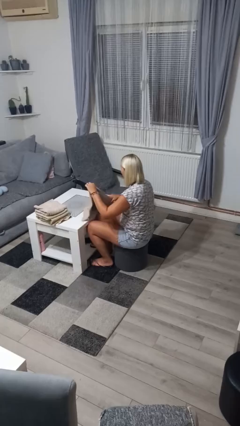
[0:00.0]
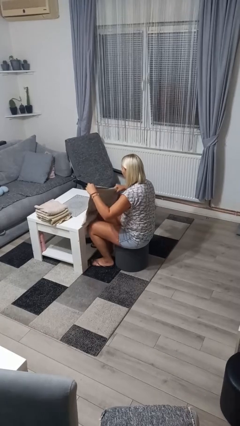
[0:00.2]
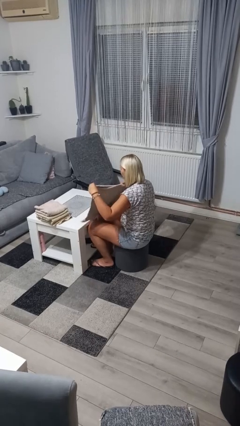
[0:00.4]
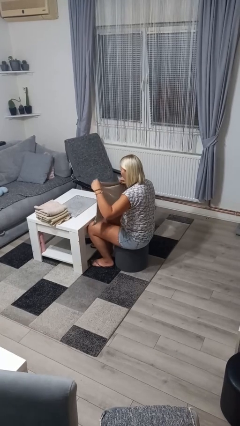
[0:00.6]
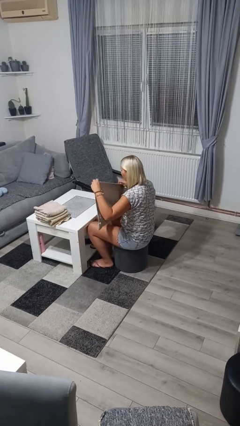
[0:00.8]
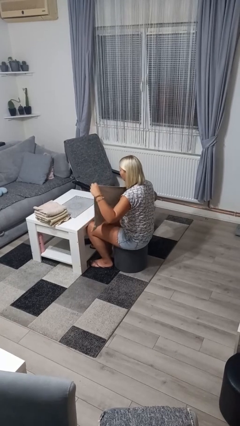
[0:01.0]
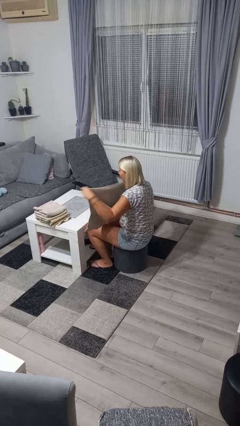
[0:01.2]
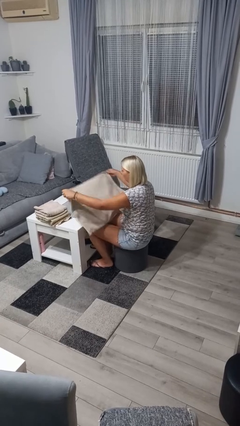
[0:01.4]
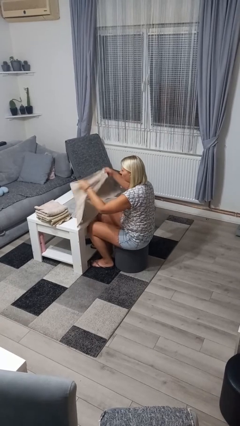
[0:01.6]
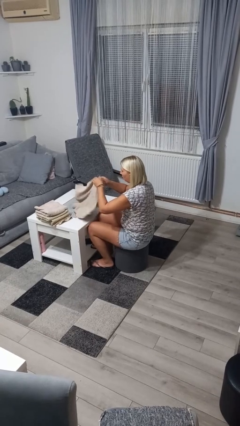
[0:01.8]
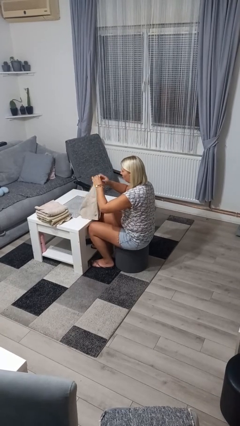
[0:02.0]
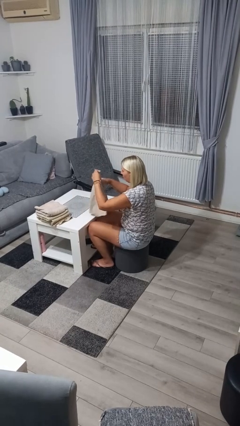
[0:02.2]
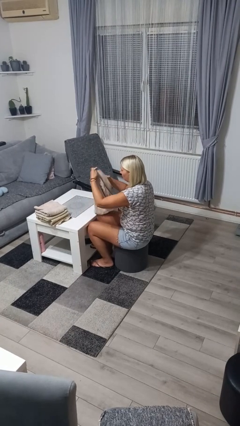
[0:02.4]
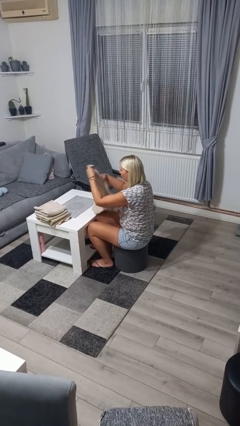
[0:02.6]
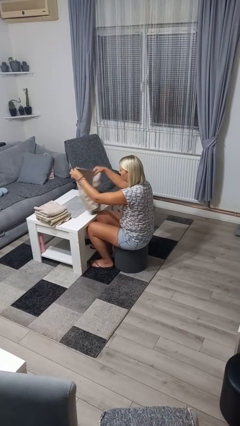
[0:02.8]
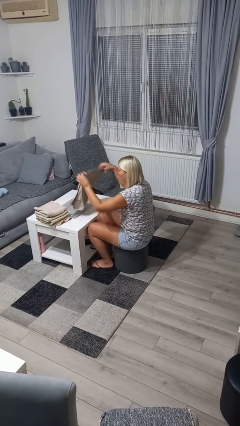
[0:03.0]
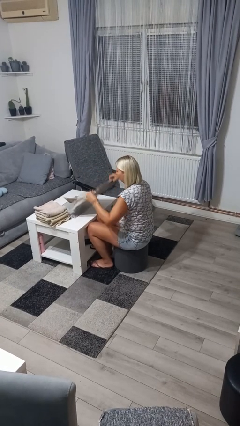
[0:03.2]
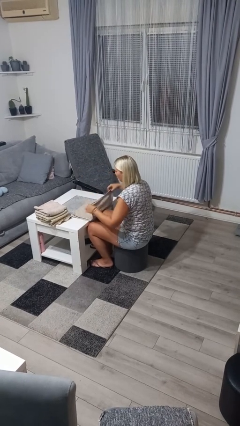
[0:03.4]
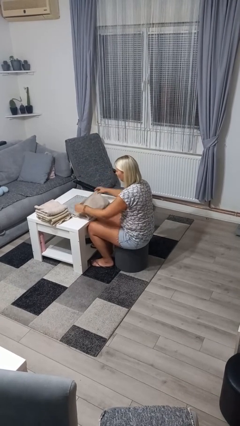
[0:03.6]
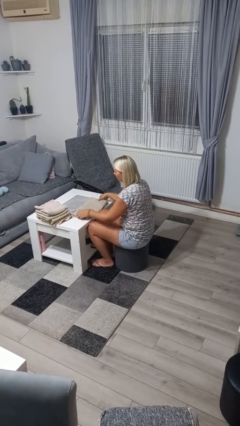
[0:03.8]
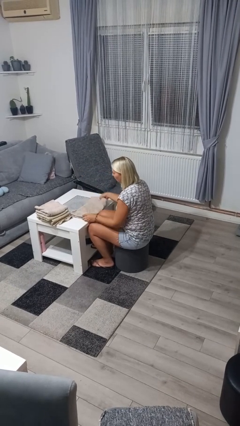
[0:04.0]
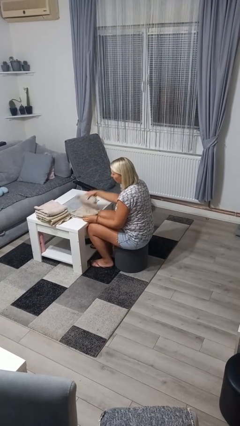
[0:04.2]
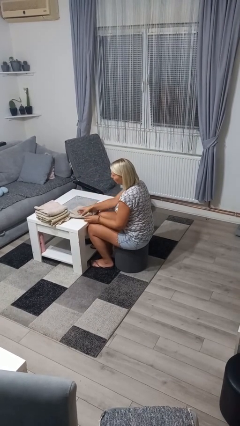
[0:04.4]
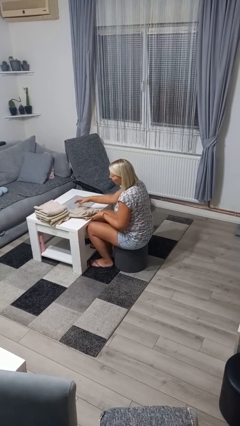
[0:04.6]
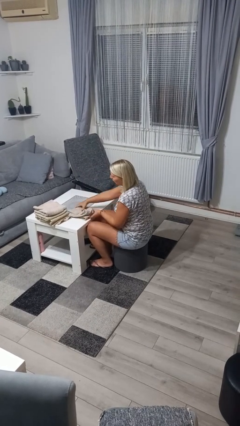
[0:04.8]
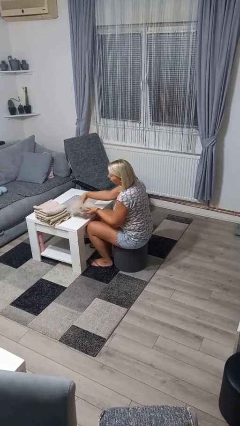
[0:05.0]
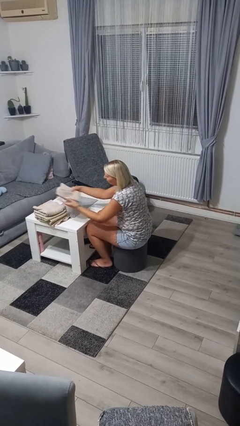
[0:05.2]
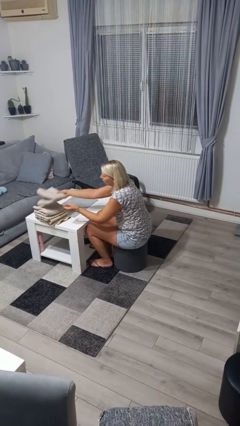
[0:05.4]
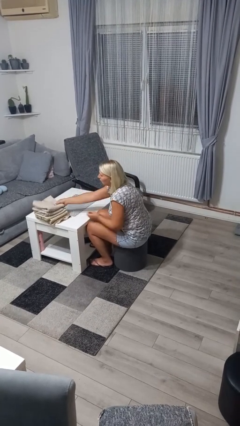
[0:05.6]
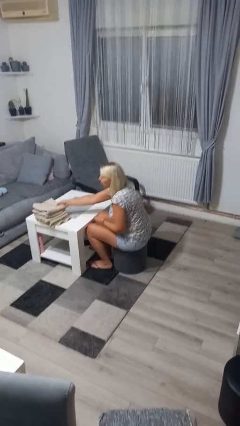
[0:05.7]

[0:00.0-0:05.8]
person folds towel

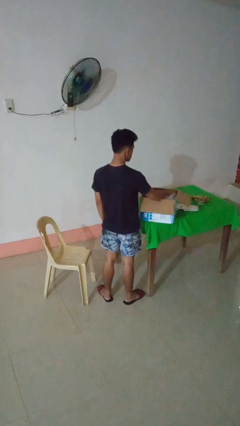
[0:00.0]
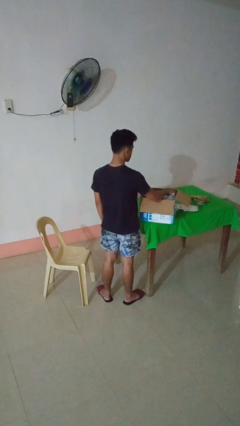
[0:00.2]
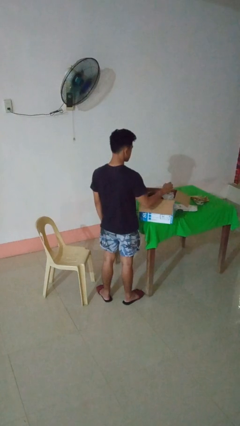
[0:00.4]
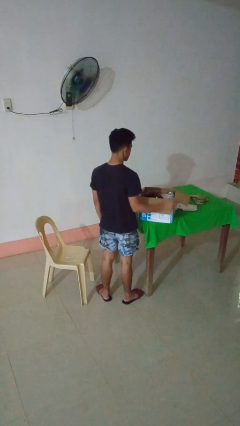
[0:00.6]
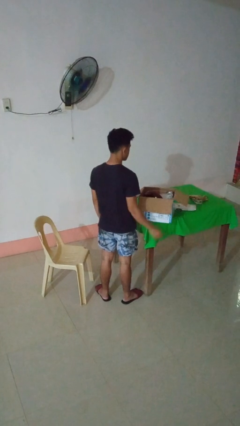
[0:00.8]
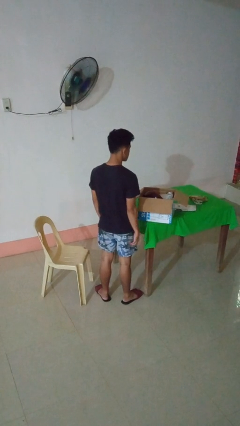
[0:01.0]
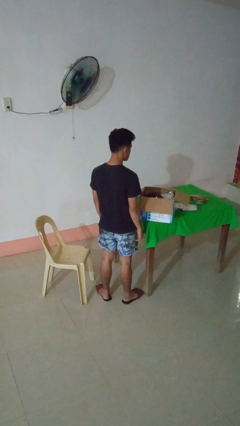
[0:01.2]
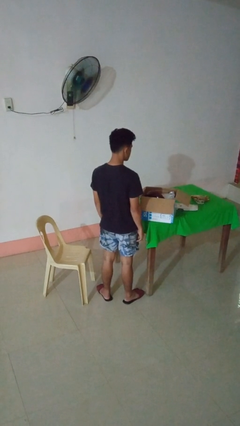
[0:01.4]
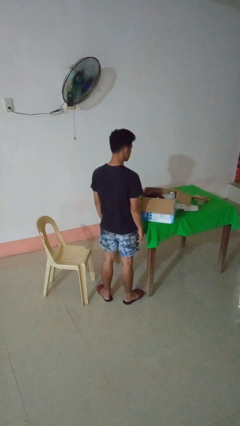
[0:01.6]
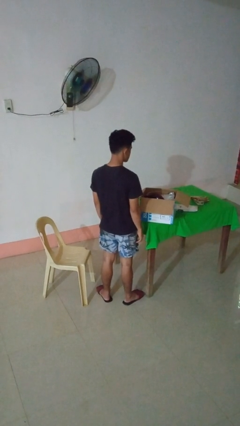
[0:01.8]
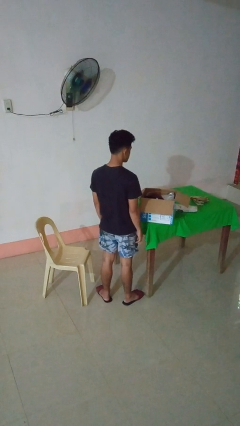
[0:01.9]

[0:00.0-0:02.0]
person puts object into box

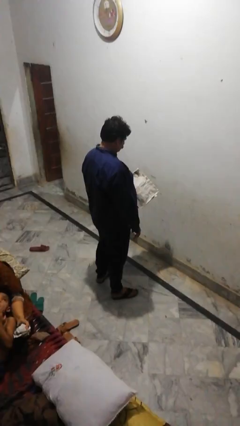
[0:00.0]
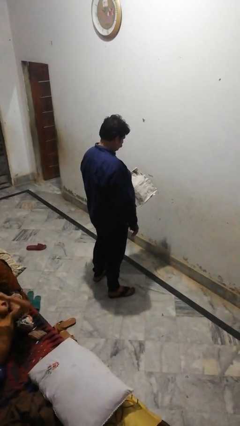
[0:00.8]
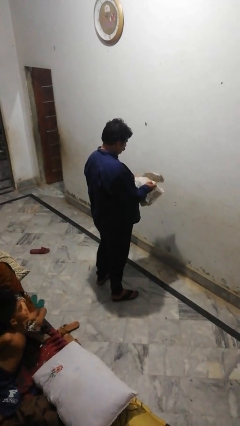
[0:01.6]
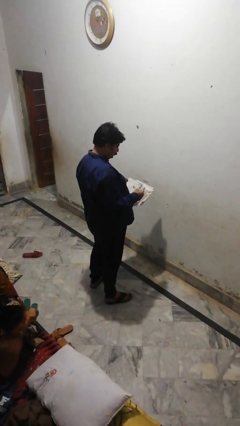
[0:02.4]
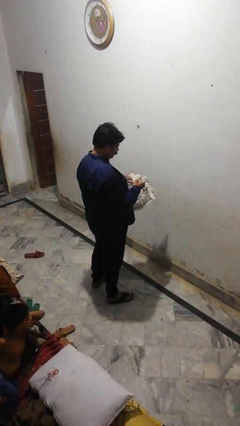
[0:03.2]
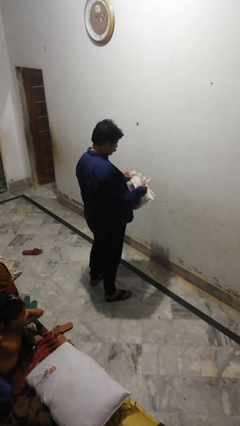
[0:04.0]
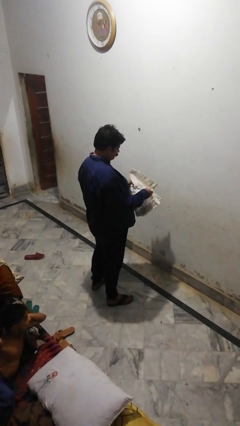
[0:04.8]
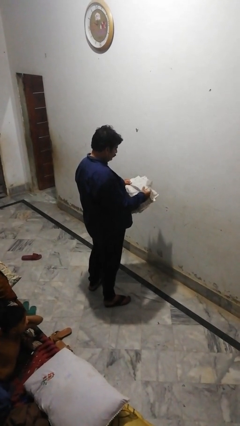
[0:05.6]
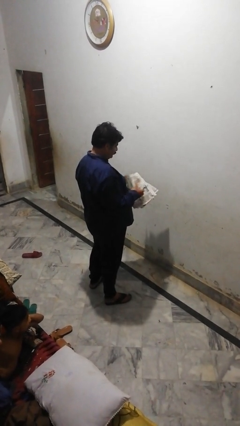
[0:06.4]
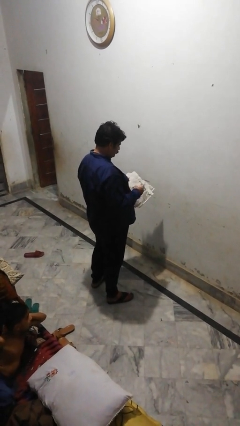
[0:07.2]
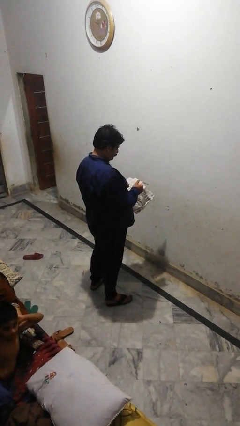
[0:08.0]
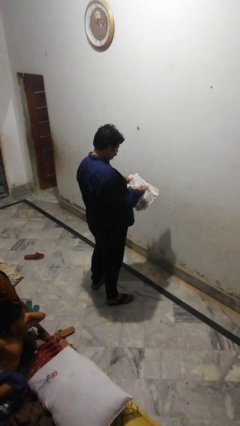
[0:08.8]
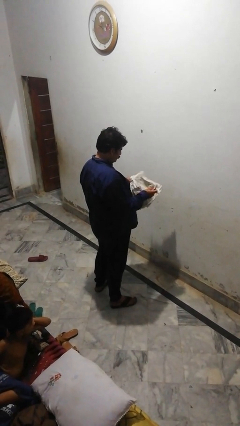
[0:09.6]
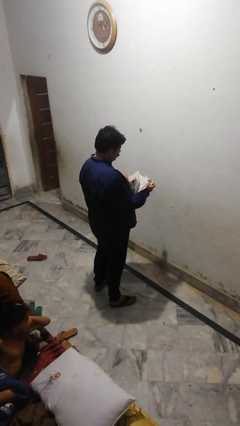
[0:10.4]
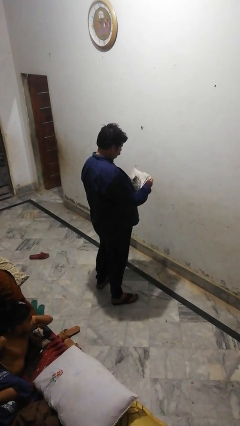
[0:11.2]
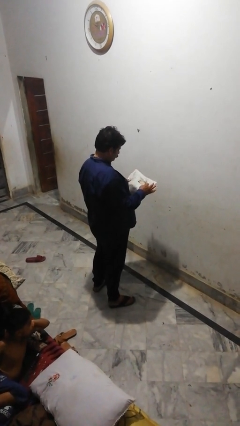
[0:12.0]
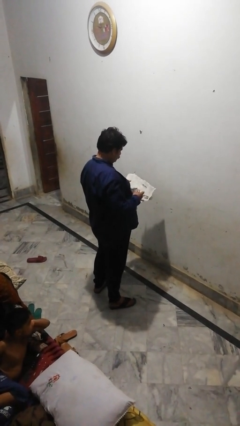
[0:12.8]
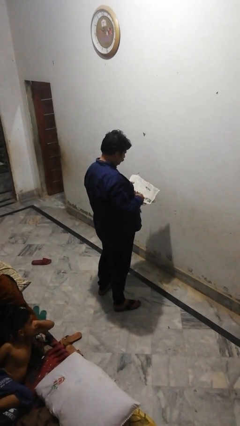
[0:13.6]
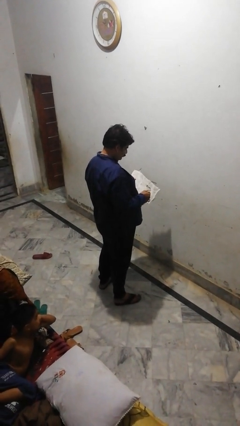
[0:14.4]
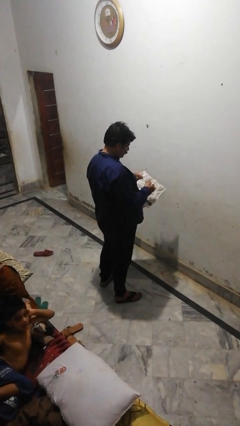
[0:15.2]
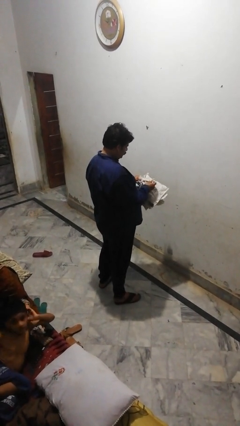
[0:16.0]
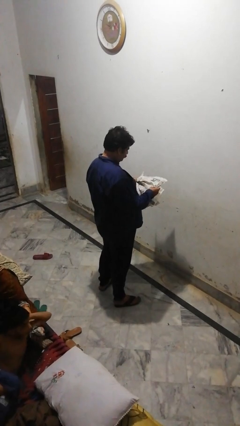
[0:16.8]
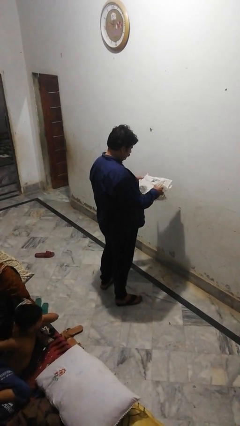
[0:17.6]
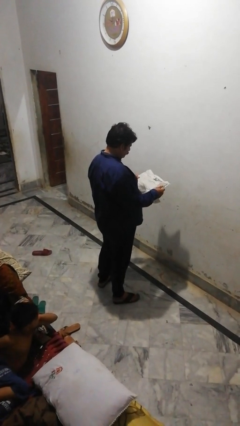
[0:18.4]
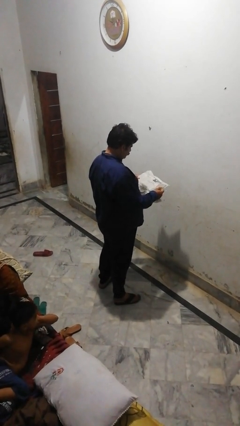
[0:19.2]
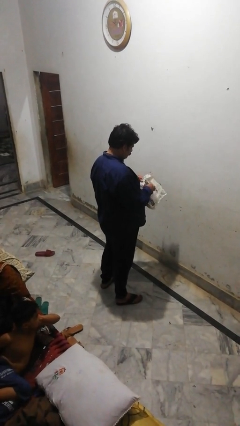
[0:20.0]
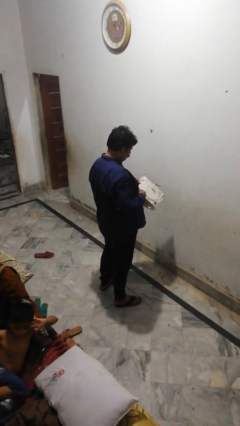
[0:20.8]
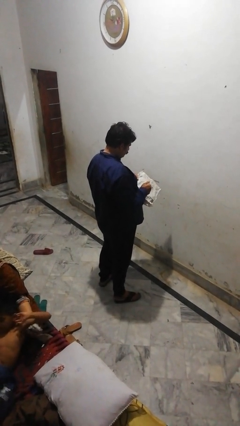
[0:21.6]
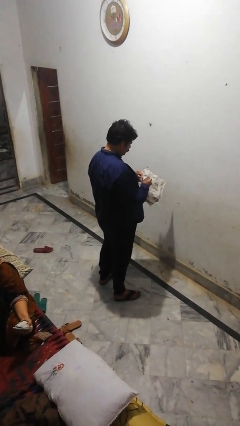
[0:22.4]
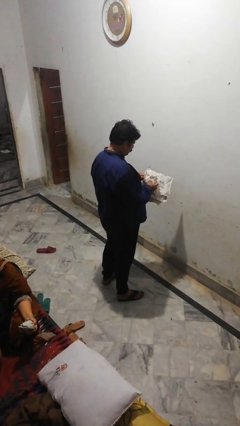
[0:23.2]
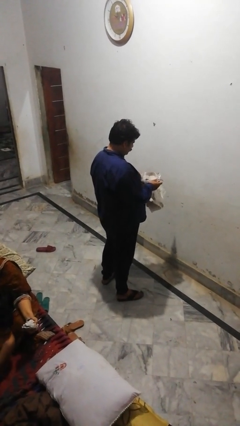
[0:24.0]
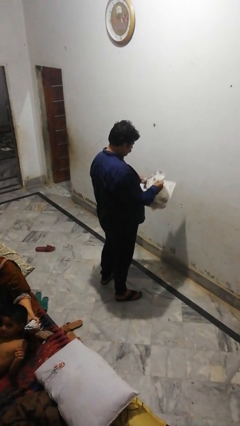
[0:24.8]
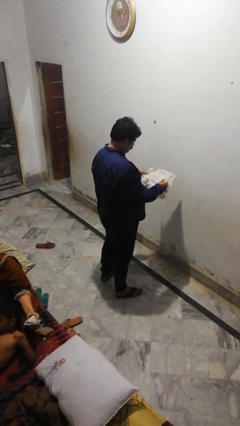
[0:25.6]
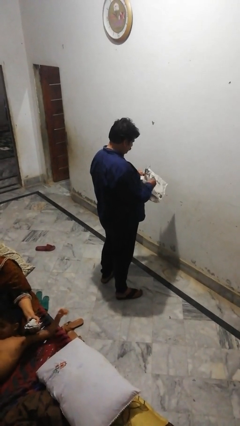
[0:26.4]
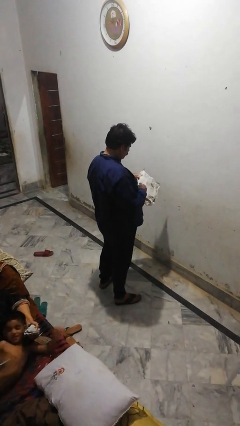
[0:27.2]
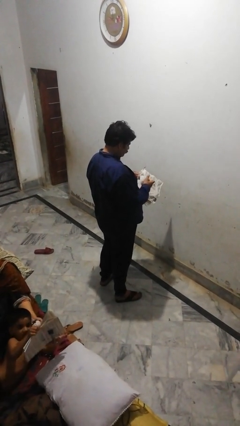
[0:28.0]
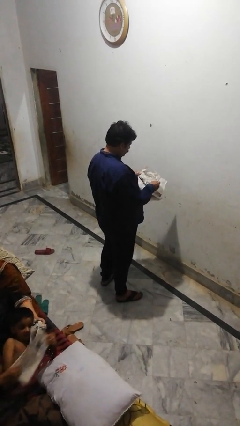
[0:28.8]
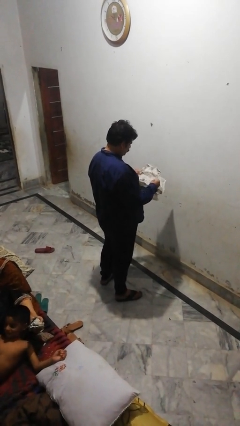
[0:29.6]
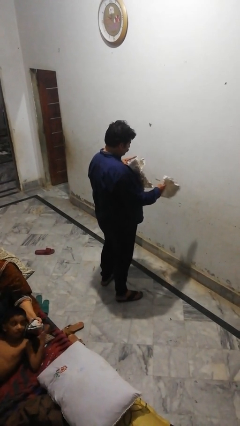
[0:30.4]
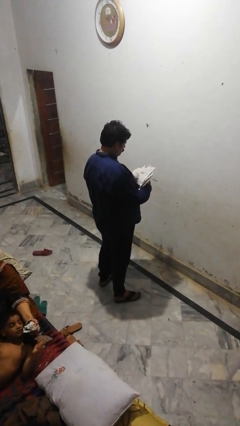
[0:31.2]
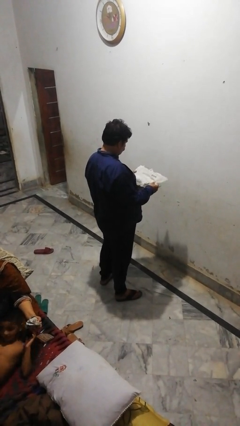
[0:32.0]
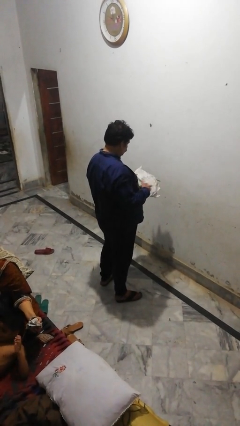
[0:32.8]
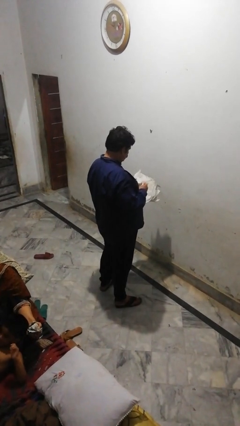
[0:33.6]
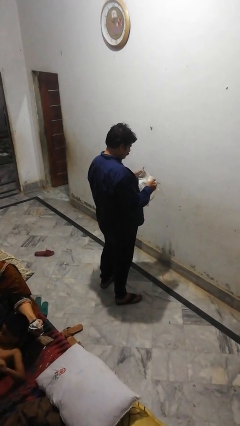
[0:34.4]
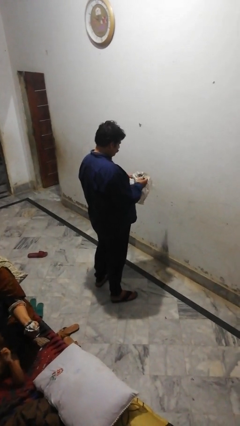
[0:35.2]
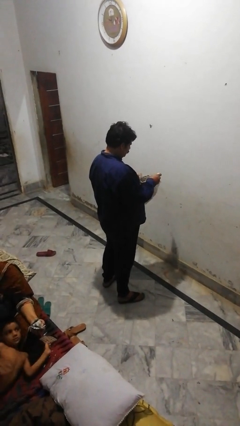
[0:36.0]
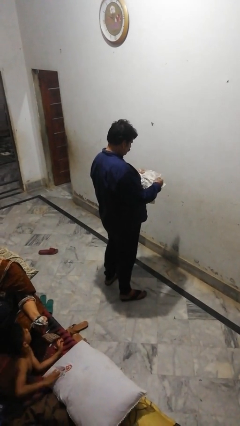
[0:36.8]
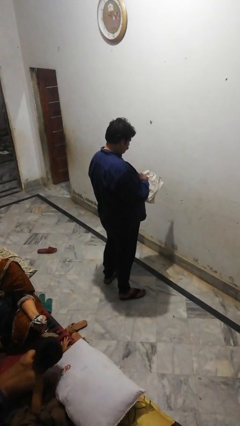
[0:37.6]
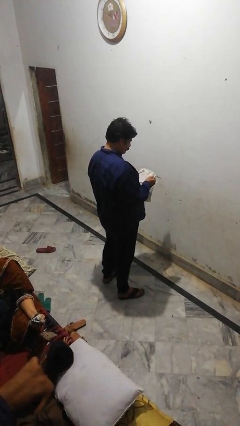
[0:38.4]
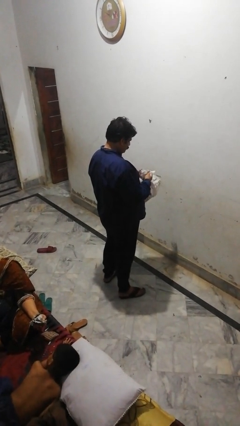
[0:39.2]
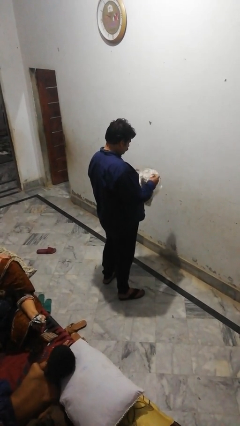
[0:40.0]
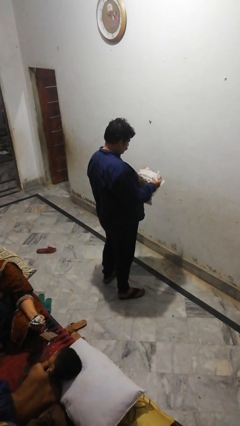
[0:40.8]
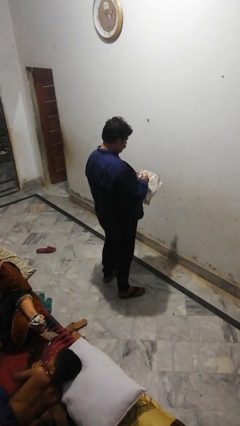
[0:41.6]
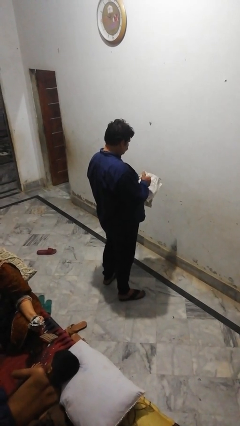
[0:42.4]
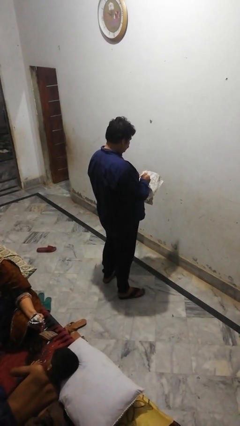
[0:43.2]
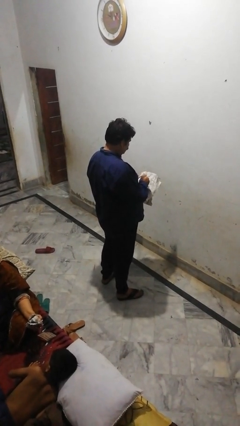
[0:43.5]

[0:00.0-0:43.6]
person crumples paper
